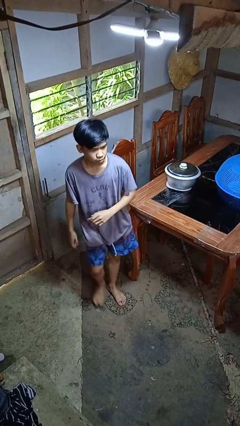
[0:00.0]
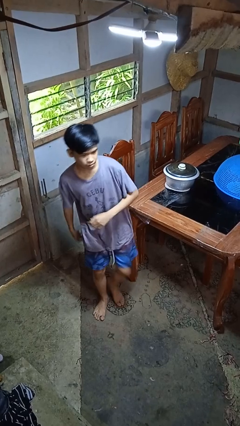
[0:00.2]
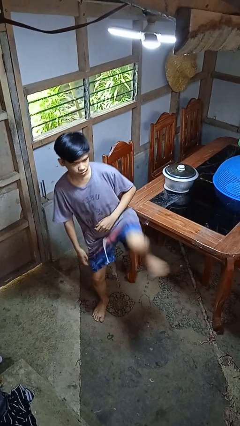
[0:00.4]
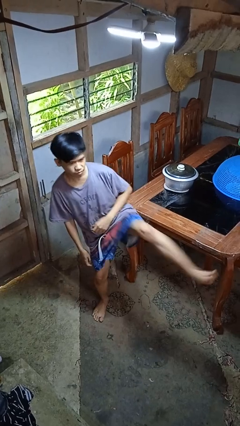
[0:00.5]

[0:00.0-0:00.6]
person karate kicks

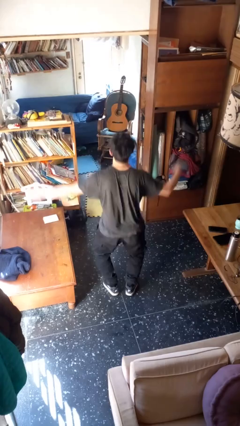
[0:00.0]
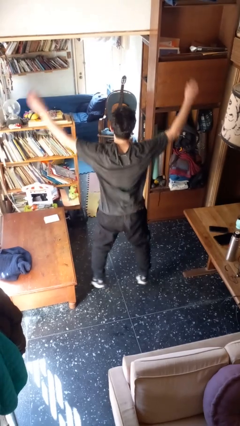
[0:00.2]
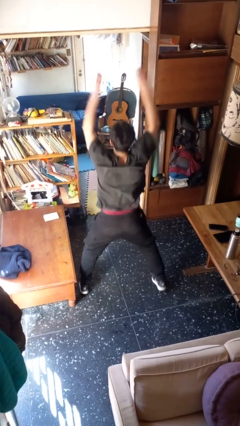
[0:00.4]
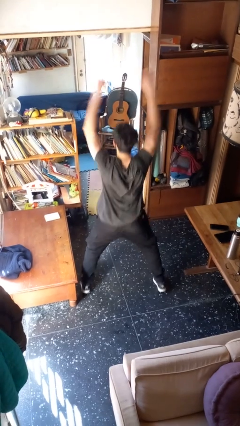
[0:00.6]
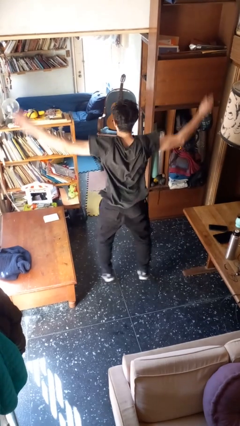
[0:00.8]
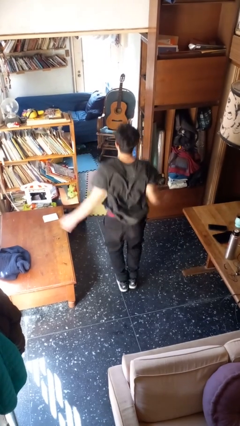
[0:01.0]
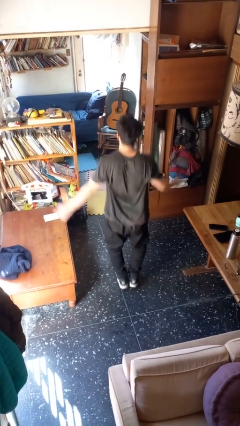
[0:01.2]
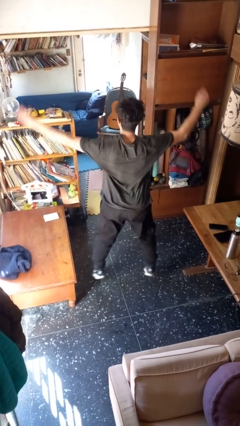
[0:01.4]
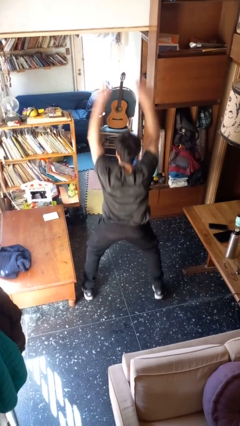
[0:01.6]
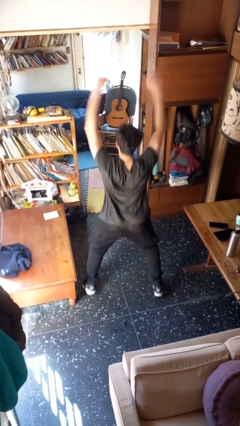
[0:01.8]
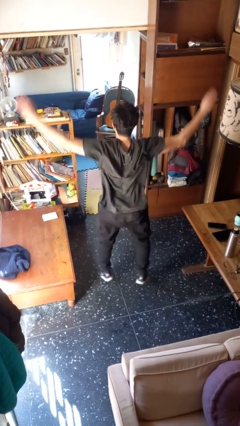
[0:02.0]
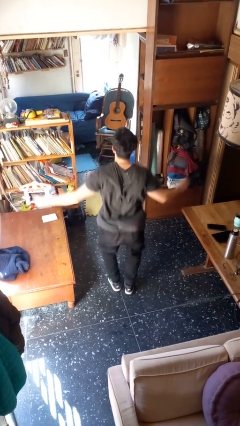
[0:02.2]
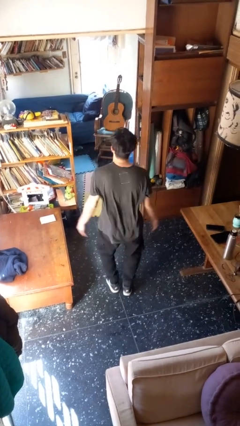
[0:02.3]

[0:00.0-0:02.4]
person exercises with jumping jacks

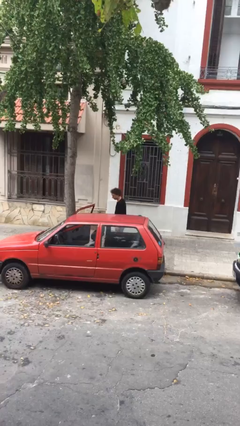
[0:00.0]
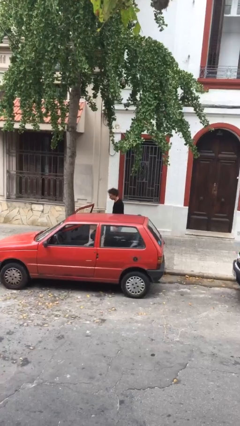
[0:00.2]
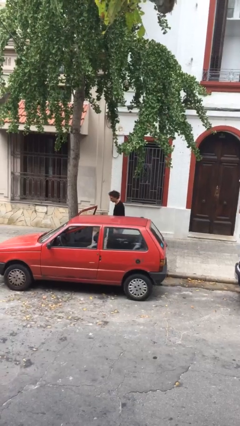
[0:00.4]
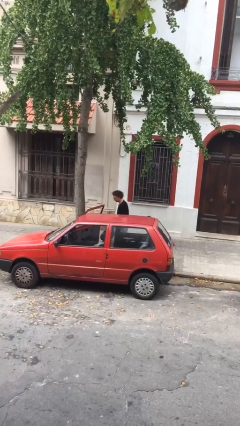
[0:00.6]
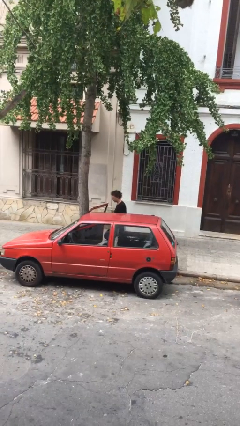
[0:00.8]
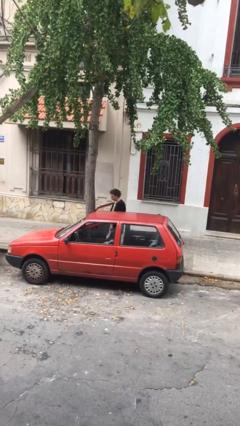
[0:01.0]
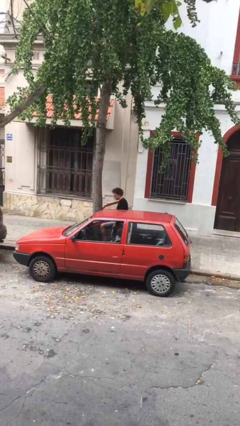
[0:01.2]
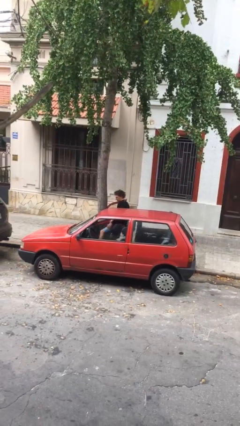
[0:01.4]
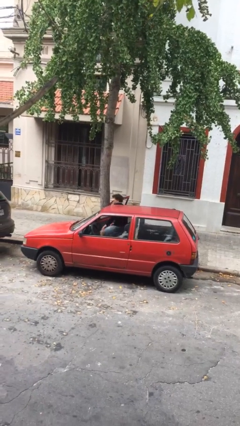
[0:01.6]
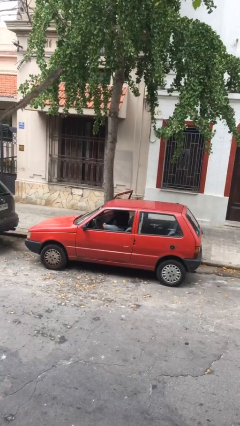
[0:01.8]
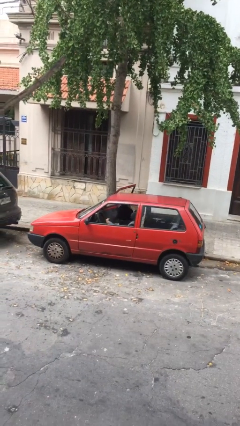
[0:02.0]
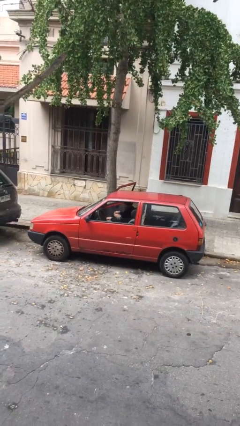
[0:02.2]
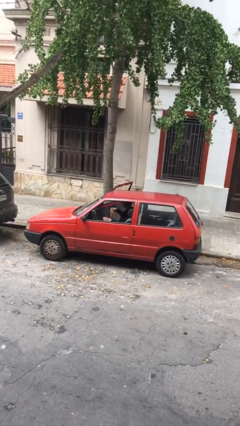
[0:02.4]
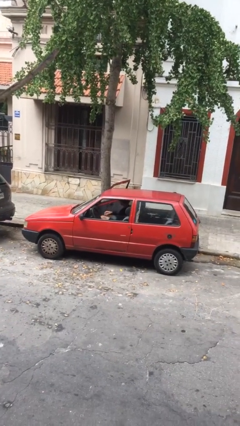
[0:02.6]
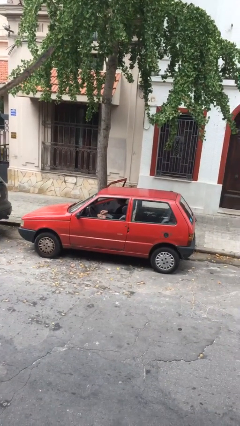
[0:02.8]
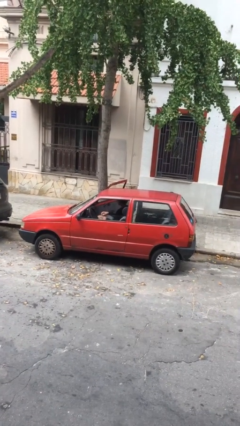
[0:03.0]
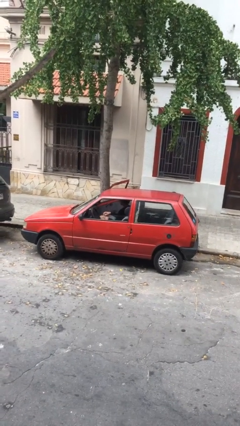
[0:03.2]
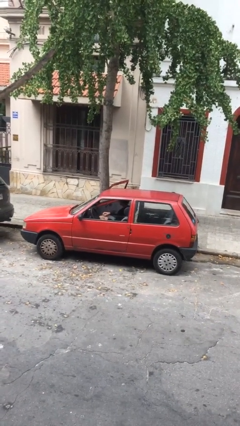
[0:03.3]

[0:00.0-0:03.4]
person enters car

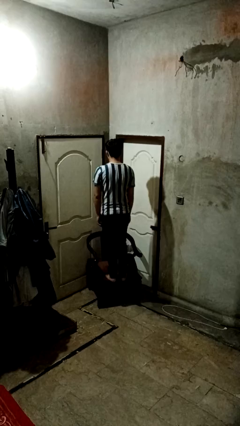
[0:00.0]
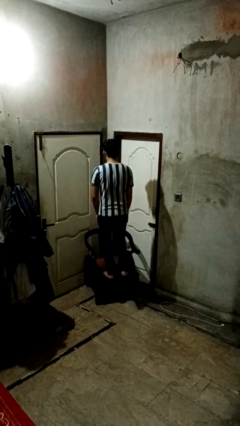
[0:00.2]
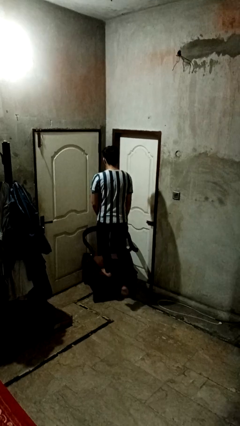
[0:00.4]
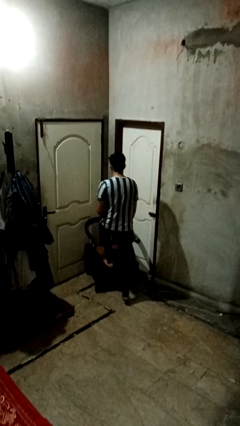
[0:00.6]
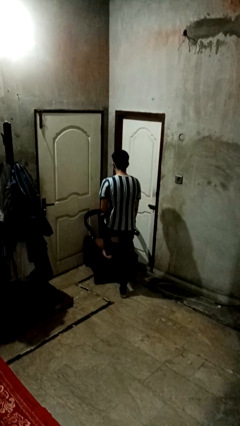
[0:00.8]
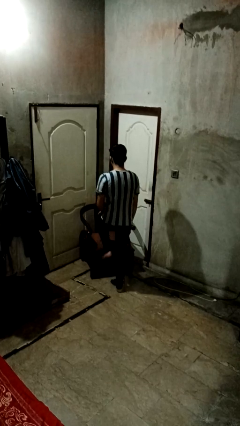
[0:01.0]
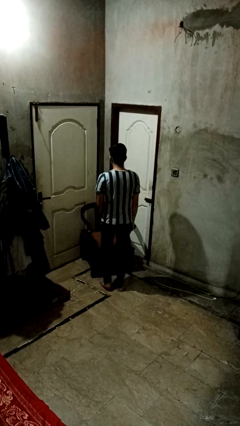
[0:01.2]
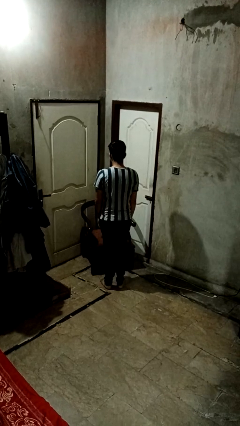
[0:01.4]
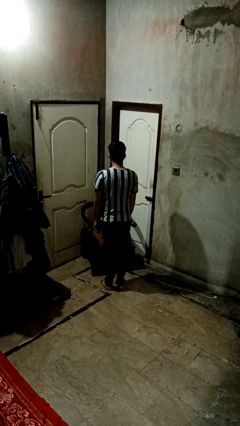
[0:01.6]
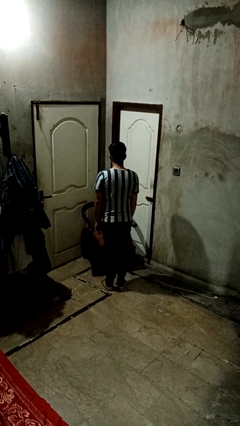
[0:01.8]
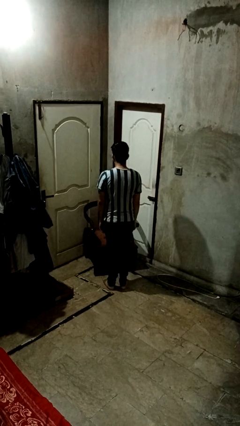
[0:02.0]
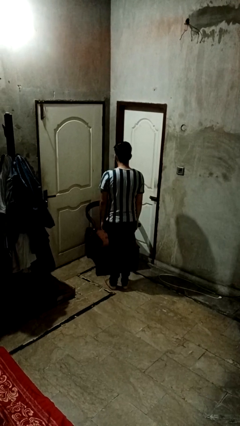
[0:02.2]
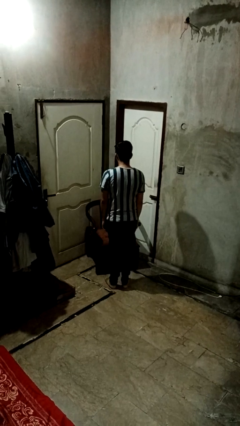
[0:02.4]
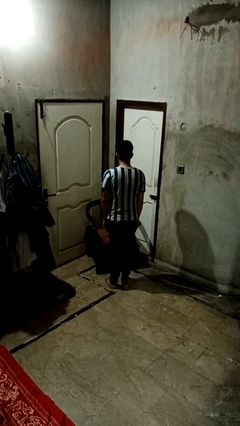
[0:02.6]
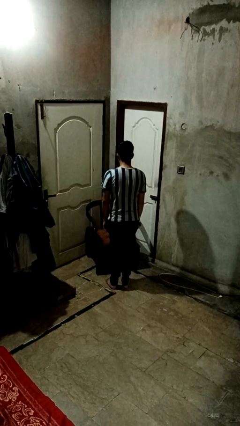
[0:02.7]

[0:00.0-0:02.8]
person climbs off couch

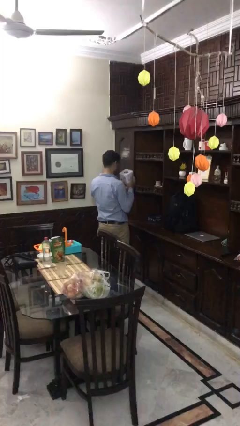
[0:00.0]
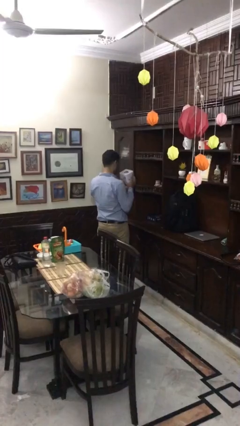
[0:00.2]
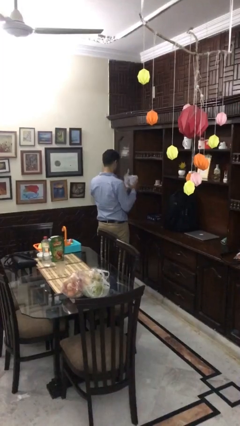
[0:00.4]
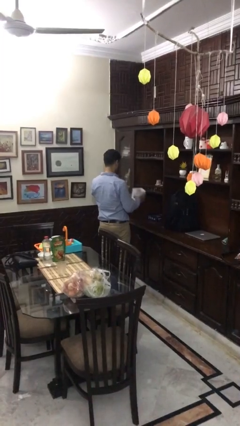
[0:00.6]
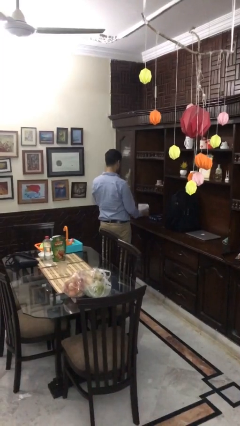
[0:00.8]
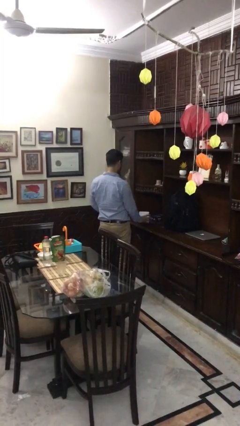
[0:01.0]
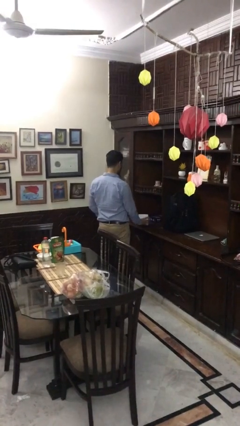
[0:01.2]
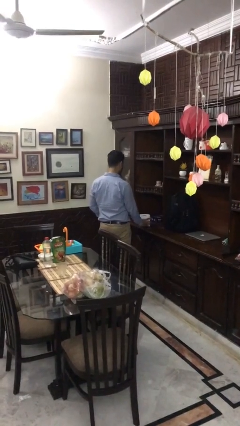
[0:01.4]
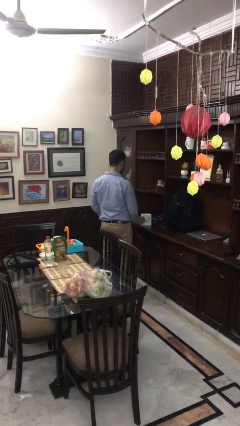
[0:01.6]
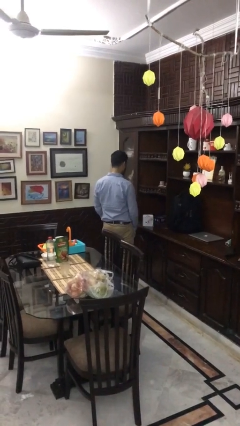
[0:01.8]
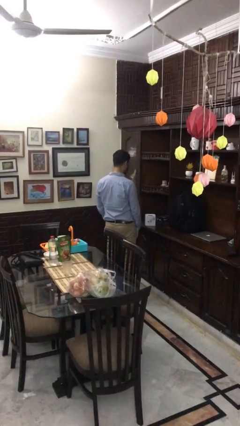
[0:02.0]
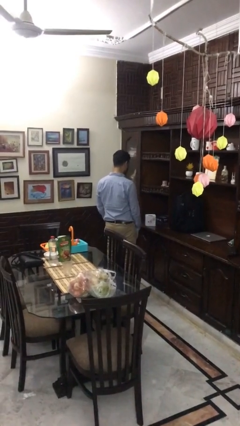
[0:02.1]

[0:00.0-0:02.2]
person puts down object on countertop

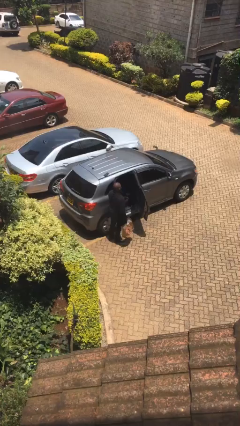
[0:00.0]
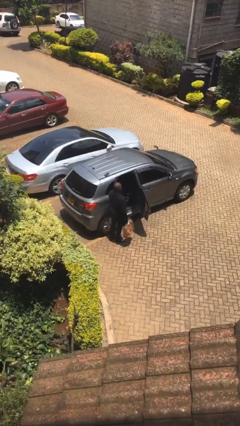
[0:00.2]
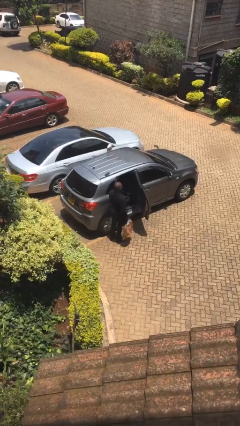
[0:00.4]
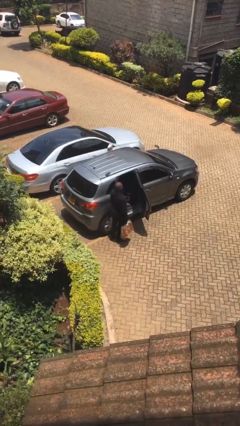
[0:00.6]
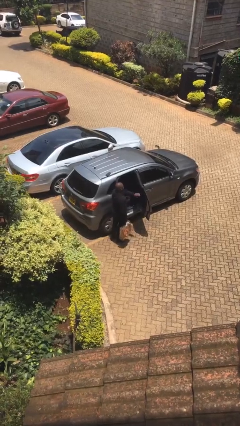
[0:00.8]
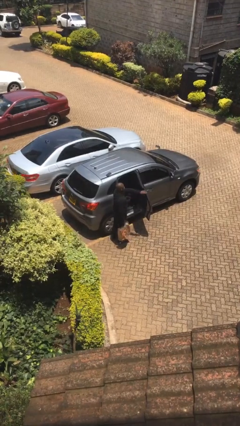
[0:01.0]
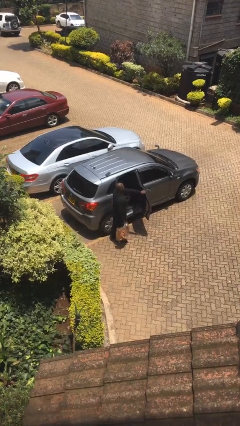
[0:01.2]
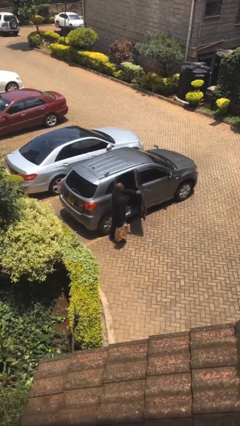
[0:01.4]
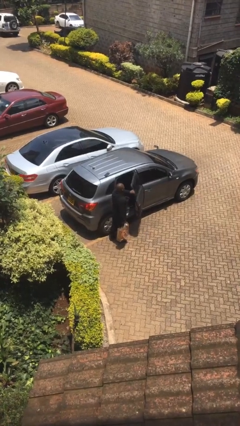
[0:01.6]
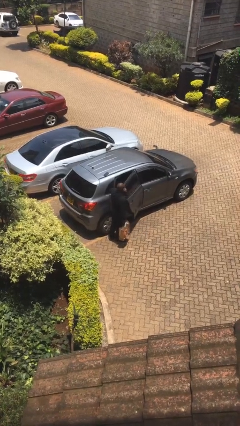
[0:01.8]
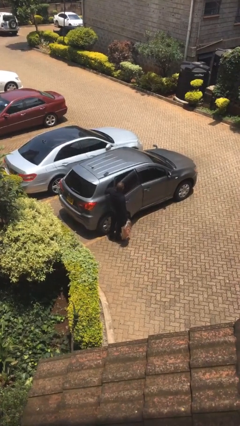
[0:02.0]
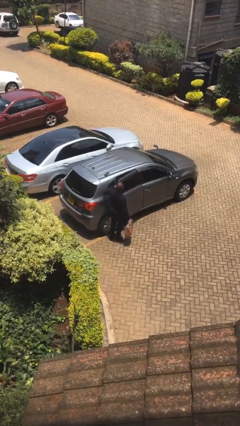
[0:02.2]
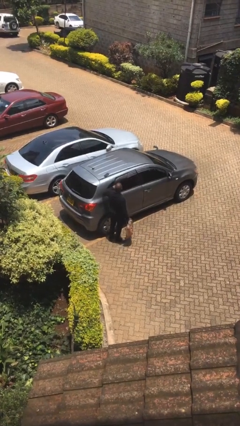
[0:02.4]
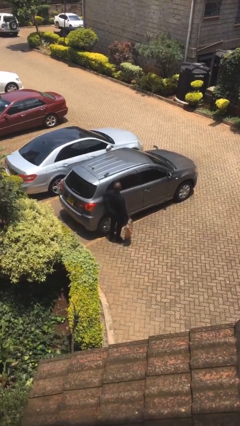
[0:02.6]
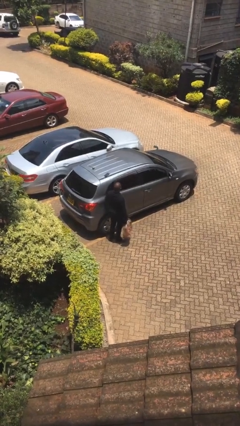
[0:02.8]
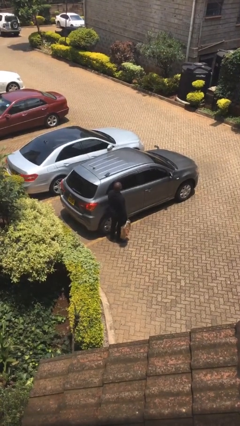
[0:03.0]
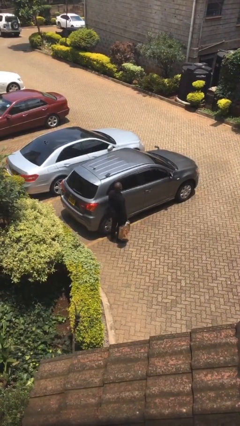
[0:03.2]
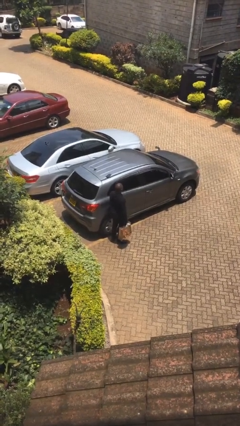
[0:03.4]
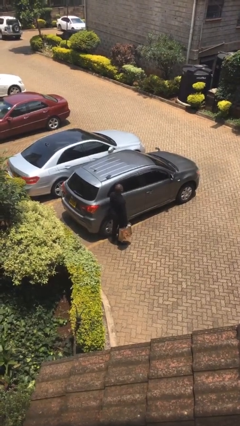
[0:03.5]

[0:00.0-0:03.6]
person closes car door

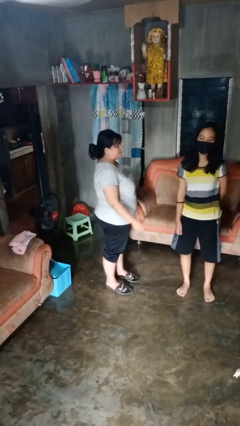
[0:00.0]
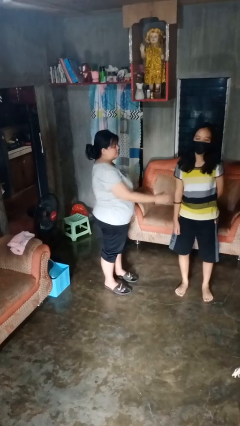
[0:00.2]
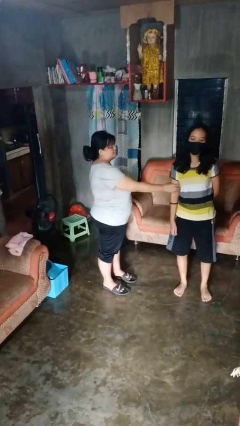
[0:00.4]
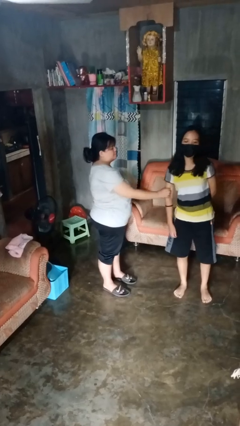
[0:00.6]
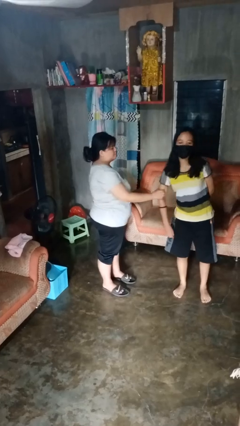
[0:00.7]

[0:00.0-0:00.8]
person grabs person by bicep

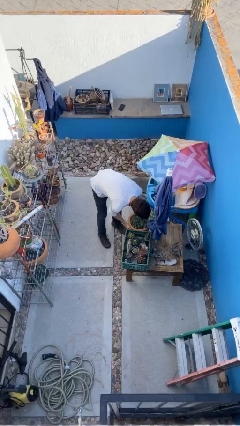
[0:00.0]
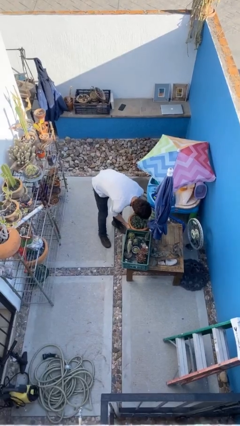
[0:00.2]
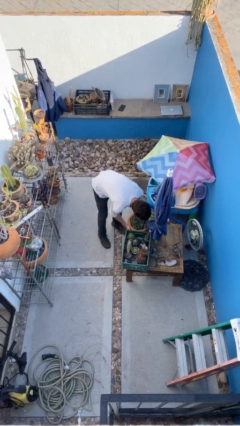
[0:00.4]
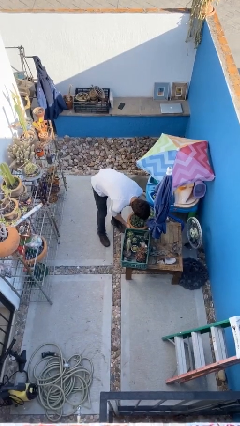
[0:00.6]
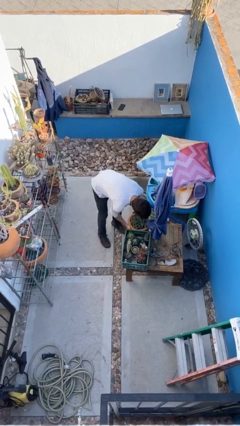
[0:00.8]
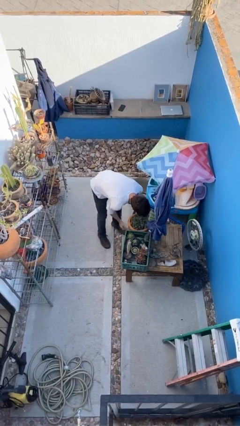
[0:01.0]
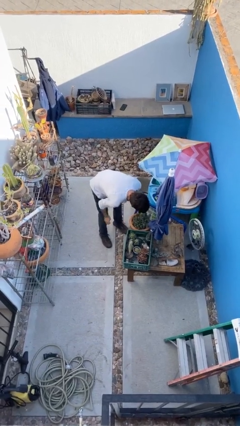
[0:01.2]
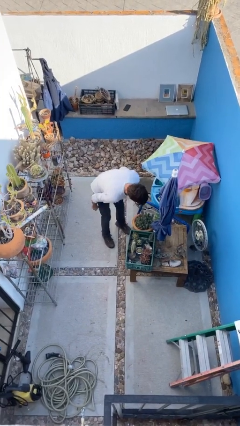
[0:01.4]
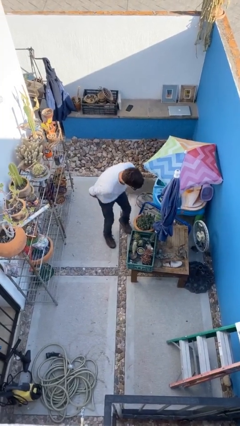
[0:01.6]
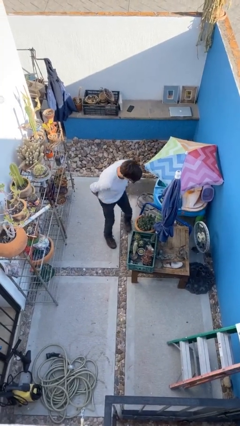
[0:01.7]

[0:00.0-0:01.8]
person puts down object on table
